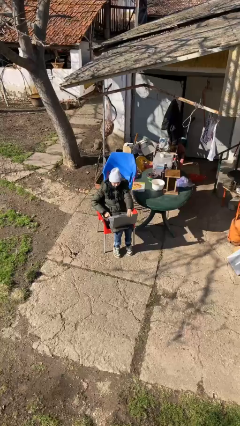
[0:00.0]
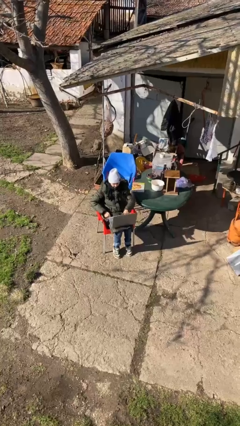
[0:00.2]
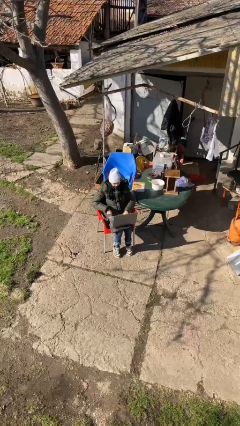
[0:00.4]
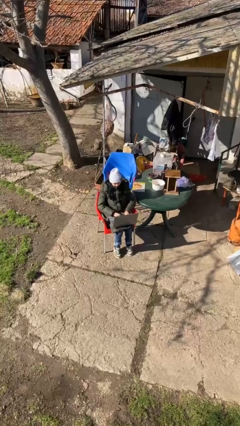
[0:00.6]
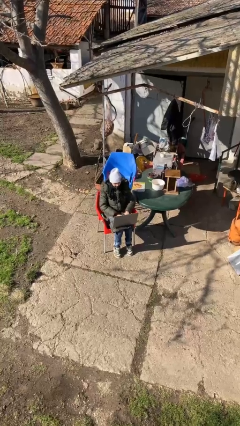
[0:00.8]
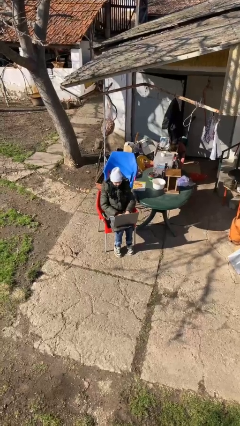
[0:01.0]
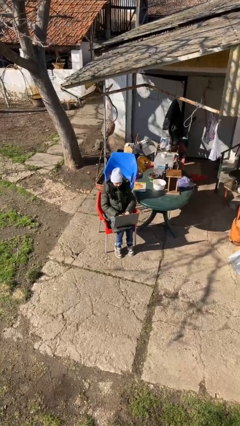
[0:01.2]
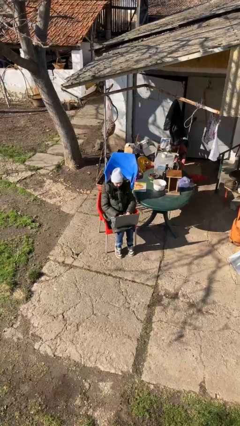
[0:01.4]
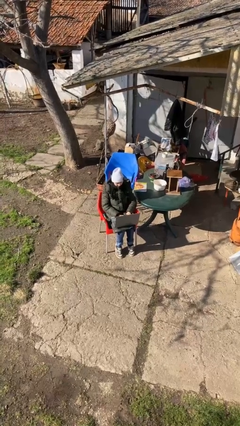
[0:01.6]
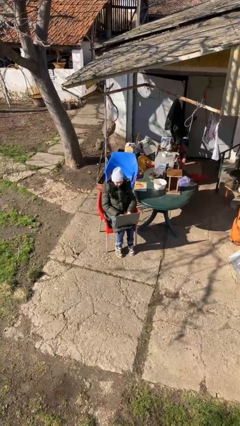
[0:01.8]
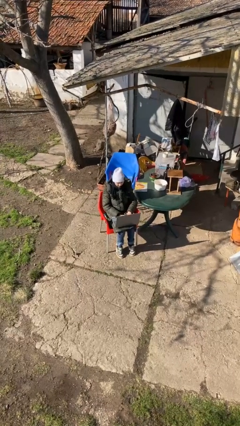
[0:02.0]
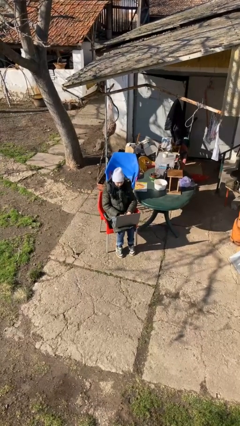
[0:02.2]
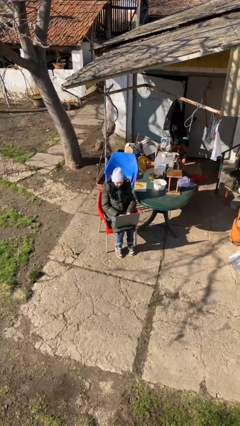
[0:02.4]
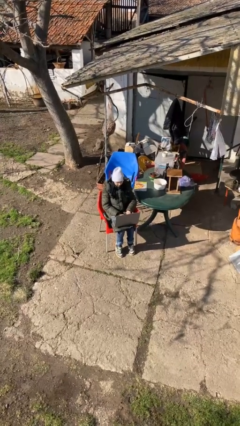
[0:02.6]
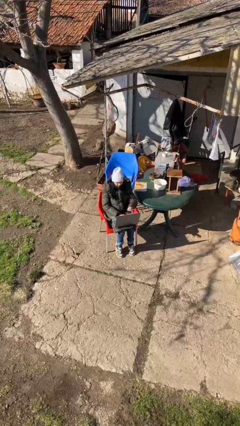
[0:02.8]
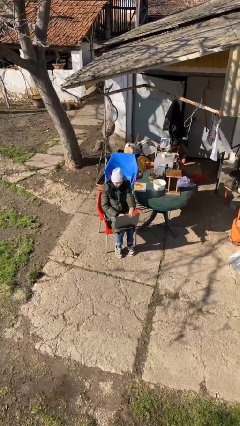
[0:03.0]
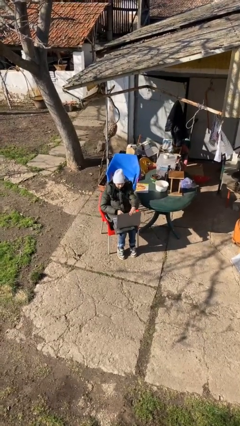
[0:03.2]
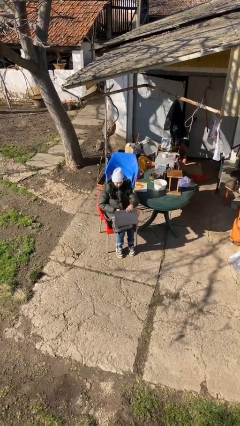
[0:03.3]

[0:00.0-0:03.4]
person interacts with laptop

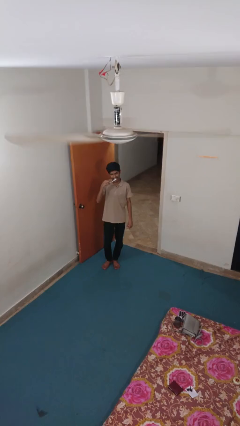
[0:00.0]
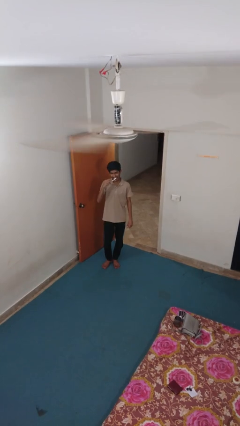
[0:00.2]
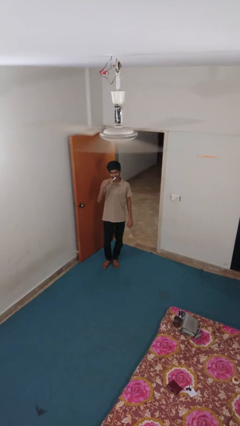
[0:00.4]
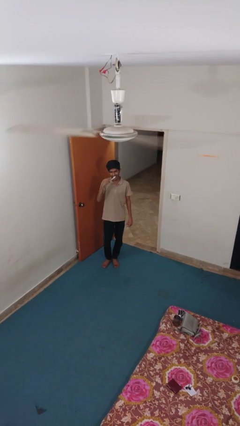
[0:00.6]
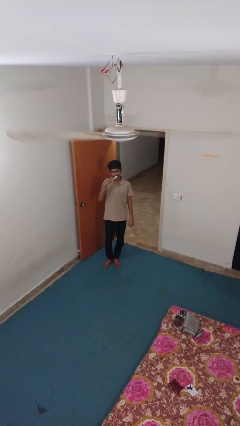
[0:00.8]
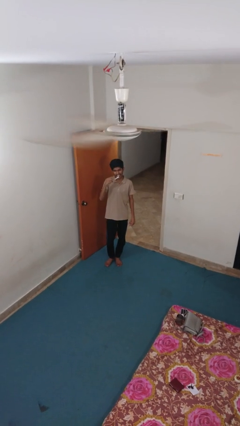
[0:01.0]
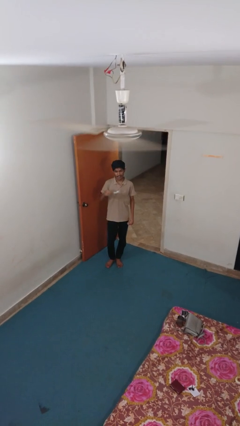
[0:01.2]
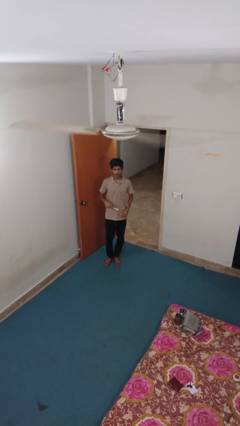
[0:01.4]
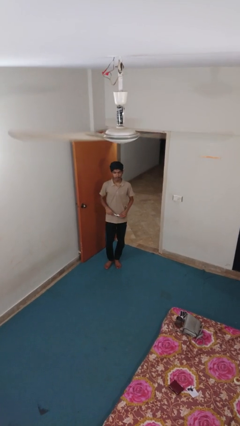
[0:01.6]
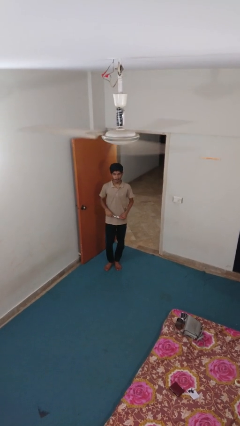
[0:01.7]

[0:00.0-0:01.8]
person brushes teeth

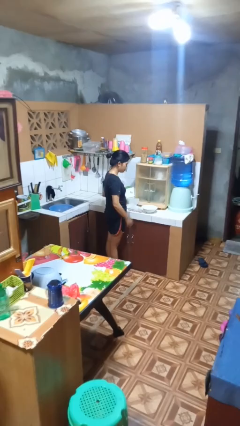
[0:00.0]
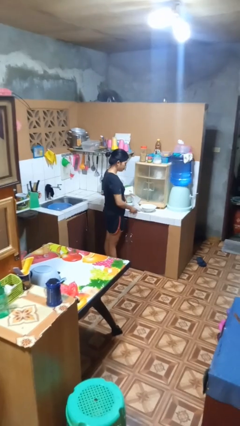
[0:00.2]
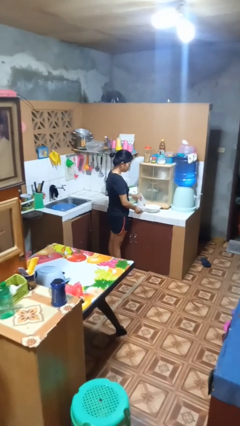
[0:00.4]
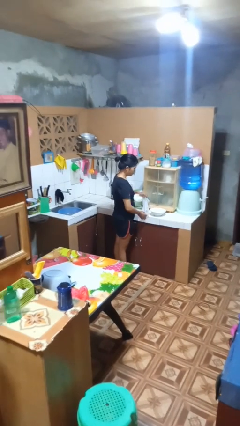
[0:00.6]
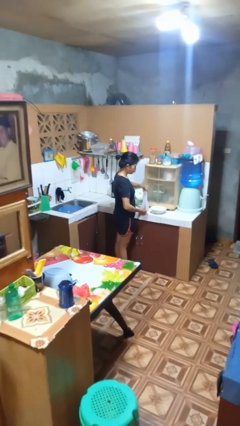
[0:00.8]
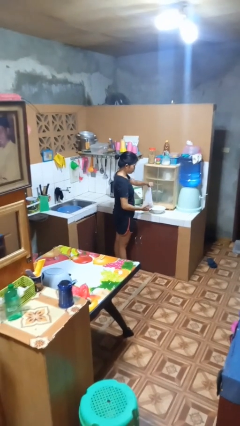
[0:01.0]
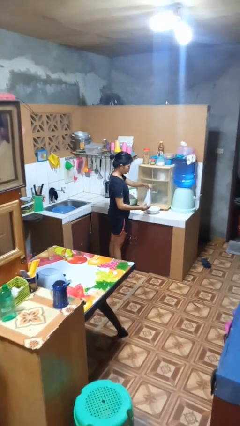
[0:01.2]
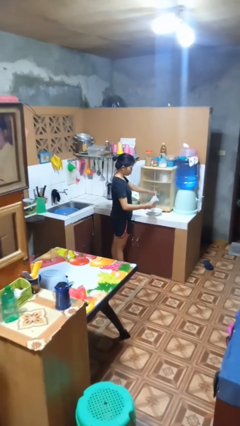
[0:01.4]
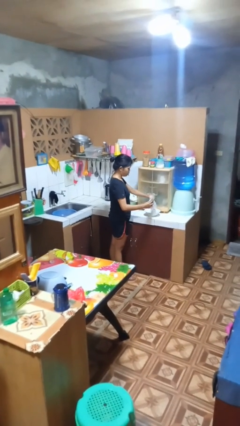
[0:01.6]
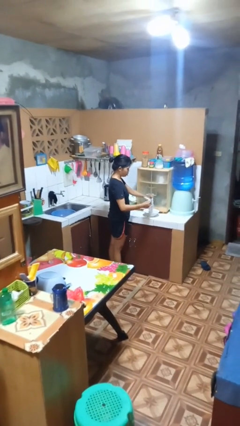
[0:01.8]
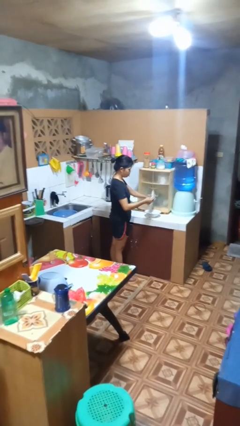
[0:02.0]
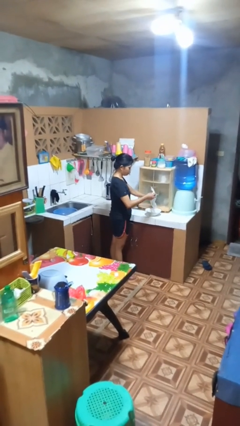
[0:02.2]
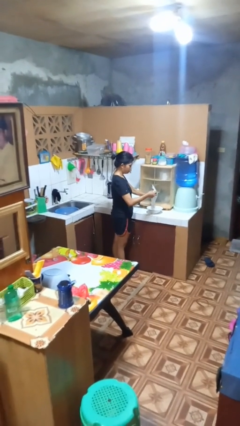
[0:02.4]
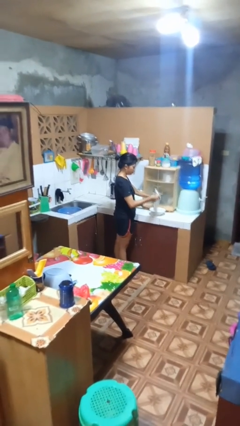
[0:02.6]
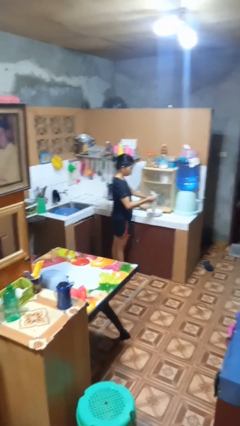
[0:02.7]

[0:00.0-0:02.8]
person pours into bowl

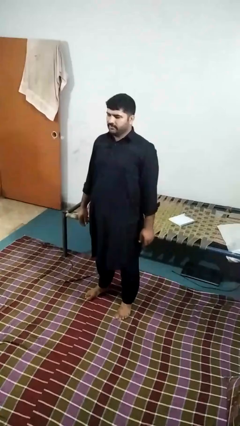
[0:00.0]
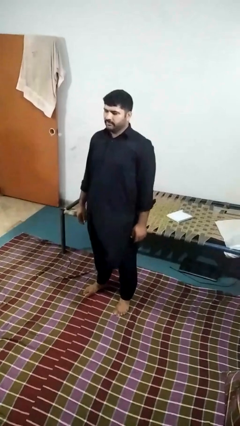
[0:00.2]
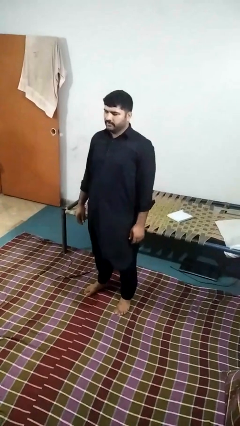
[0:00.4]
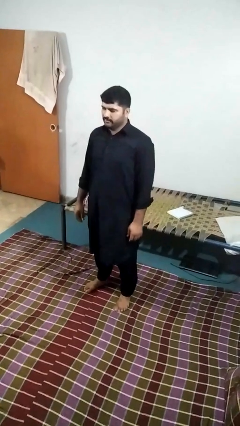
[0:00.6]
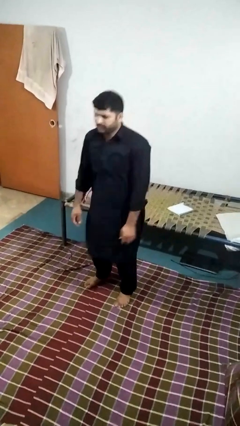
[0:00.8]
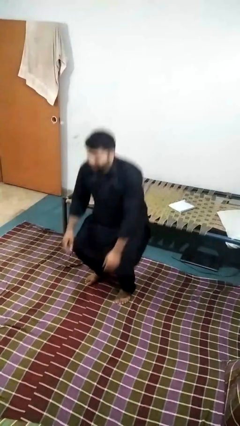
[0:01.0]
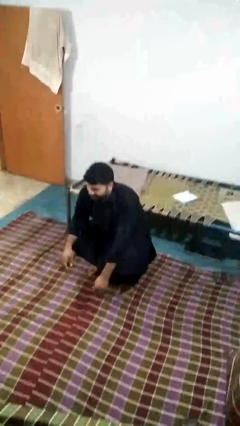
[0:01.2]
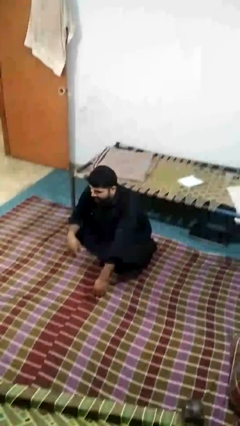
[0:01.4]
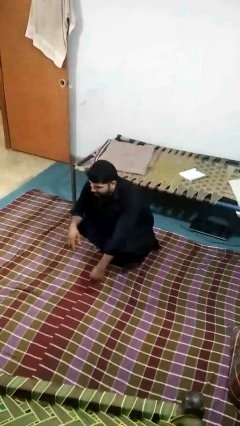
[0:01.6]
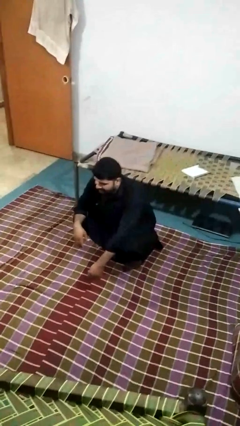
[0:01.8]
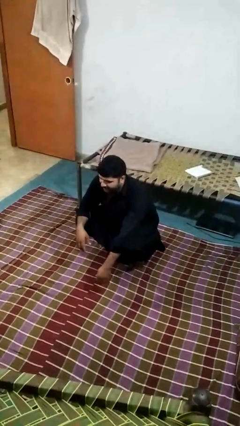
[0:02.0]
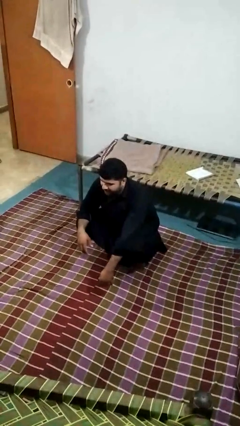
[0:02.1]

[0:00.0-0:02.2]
person squats

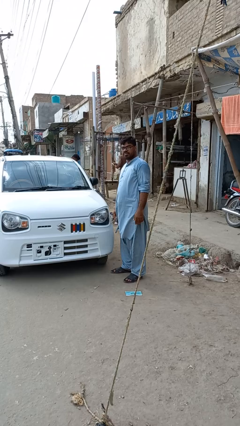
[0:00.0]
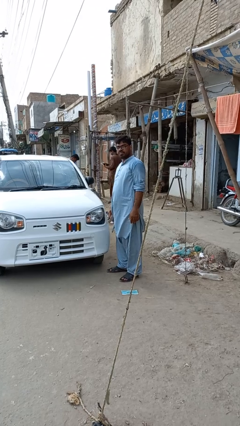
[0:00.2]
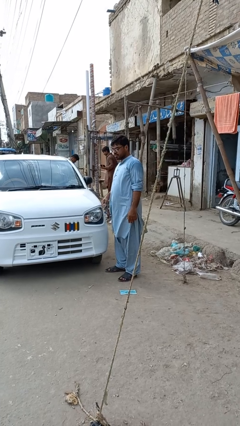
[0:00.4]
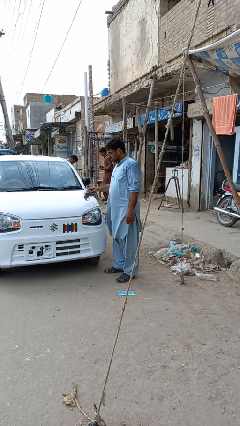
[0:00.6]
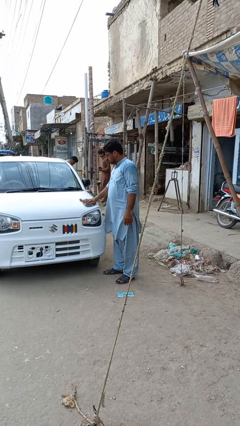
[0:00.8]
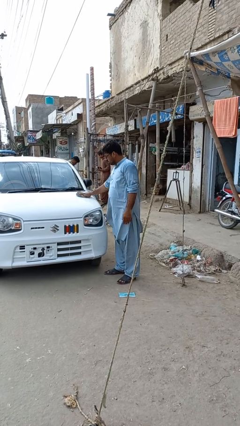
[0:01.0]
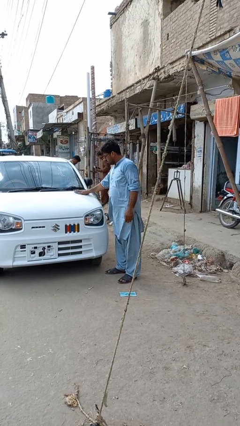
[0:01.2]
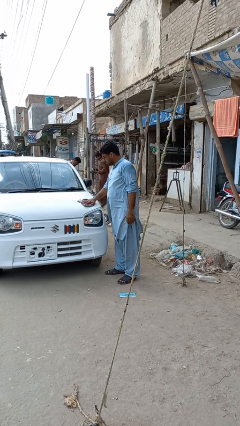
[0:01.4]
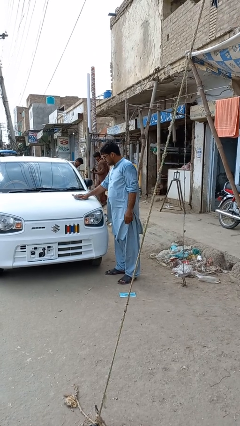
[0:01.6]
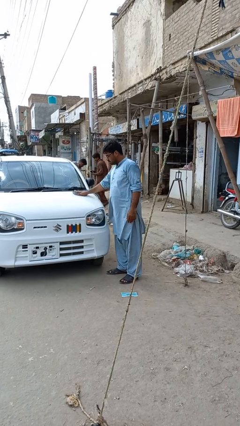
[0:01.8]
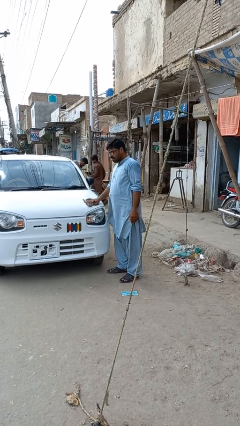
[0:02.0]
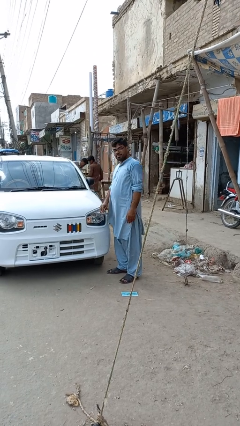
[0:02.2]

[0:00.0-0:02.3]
person polishes car with rag

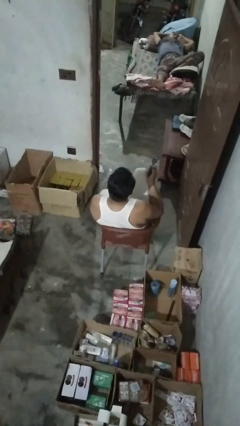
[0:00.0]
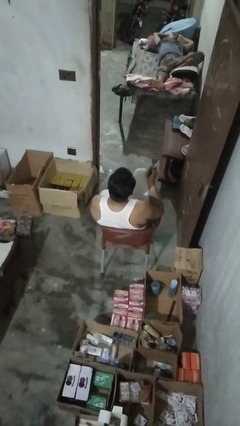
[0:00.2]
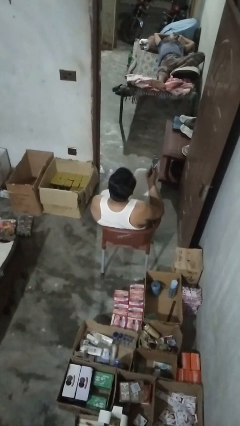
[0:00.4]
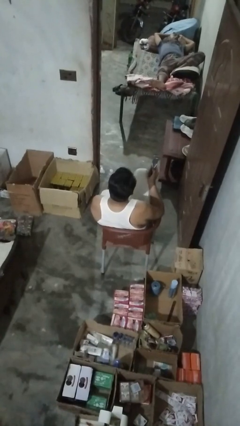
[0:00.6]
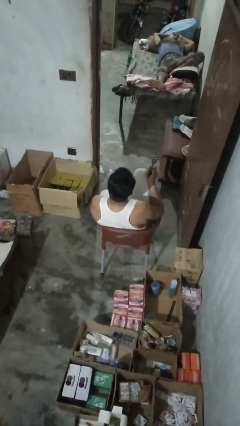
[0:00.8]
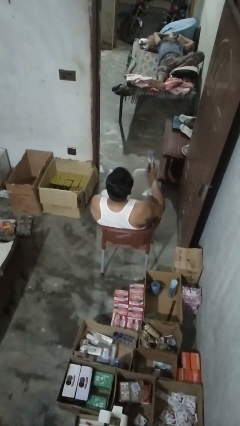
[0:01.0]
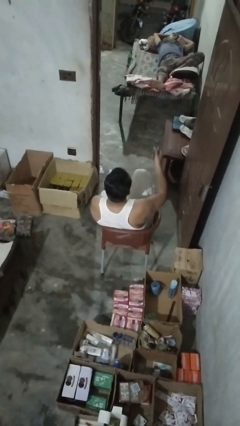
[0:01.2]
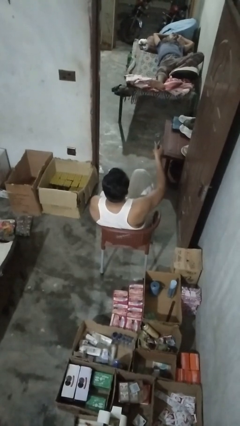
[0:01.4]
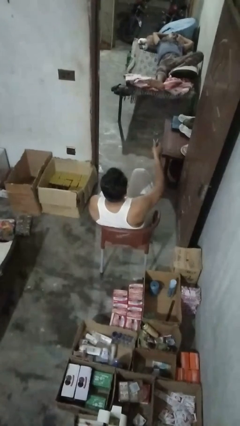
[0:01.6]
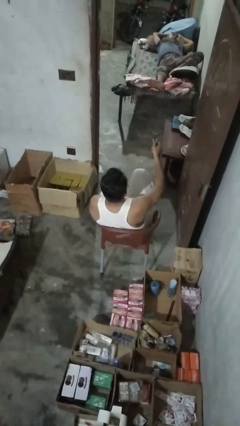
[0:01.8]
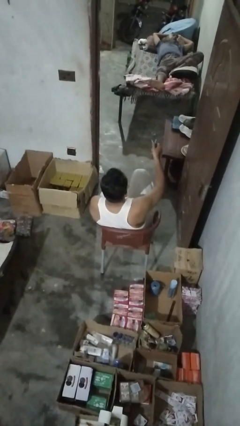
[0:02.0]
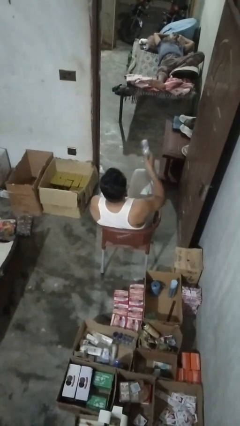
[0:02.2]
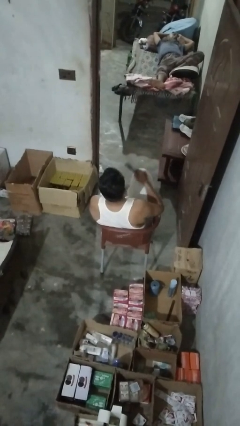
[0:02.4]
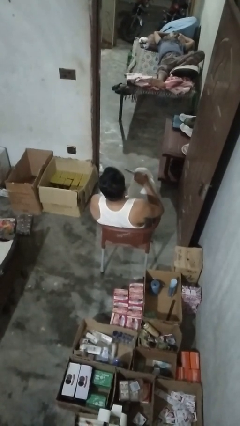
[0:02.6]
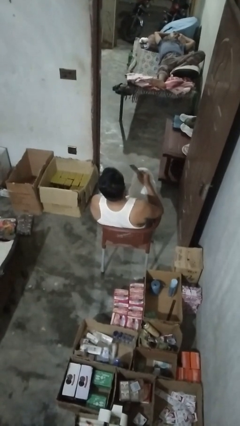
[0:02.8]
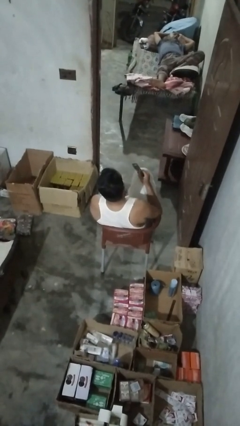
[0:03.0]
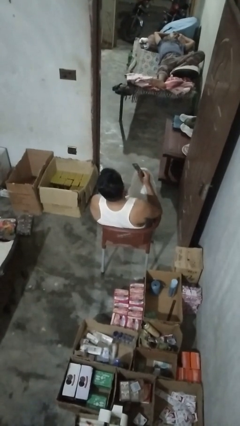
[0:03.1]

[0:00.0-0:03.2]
person uses television remote

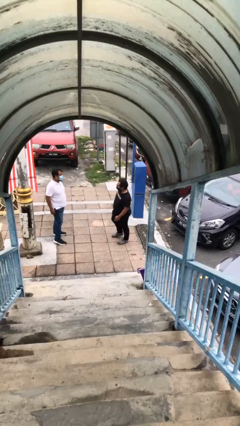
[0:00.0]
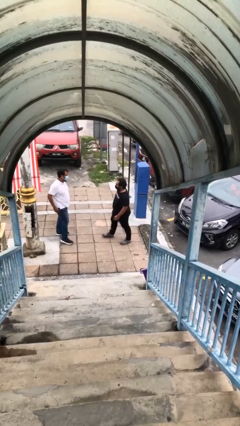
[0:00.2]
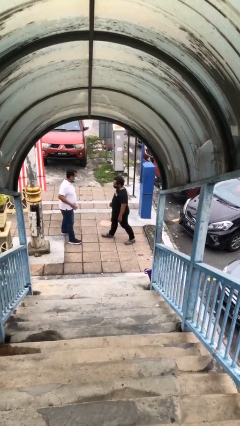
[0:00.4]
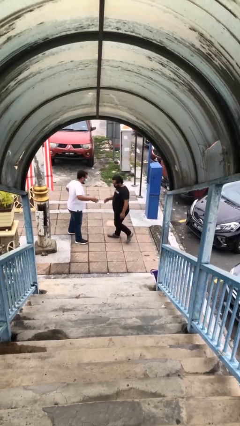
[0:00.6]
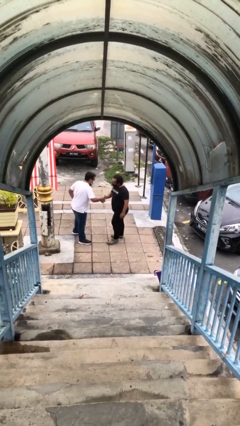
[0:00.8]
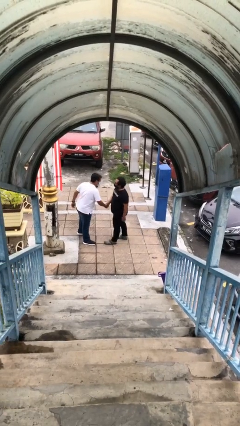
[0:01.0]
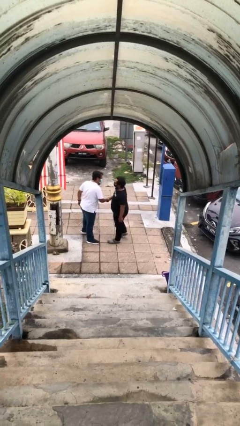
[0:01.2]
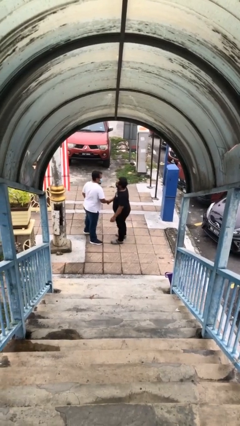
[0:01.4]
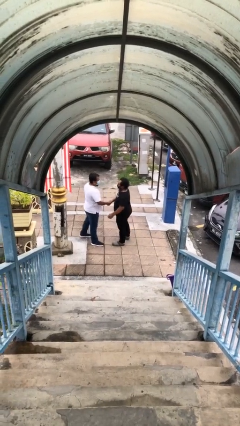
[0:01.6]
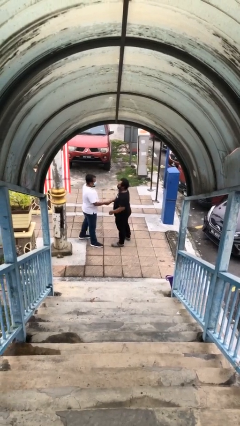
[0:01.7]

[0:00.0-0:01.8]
person shakes hand
